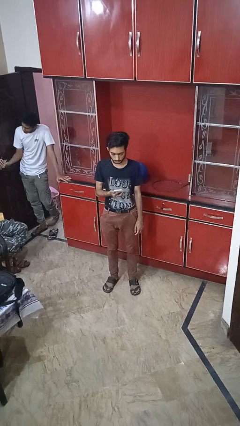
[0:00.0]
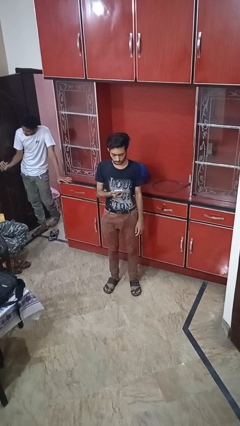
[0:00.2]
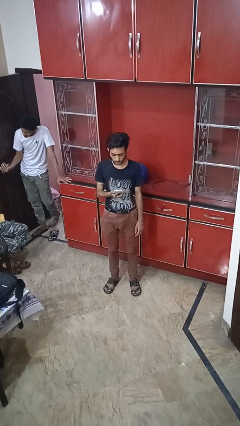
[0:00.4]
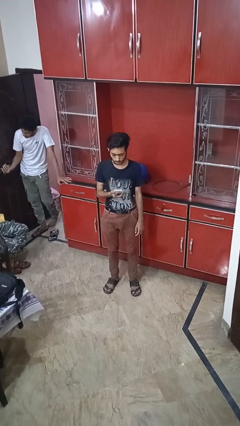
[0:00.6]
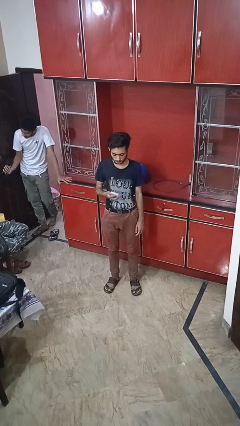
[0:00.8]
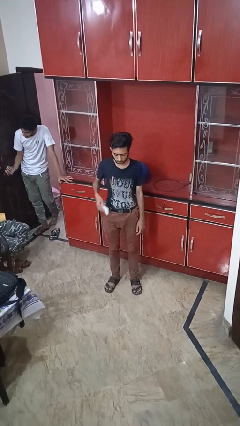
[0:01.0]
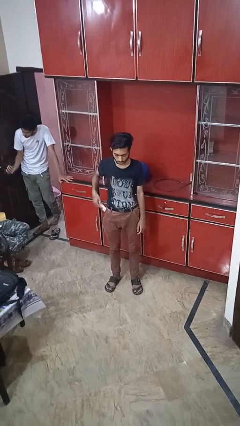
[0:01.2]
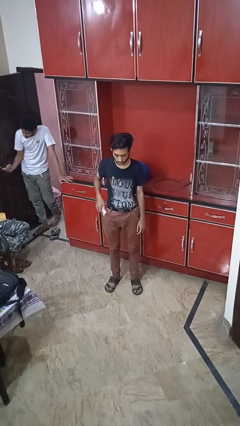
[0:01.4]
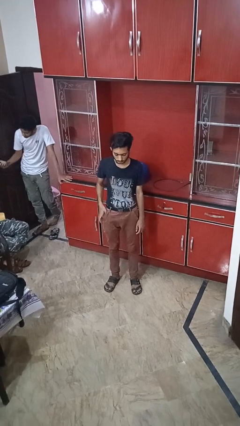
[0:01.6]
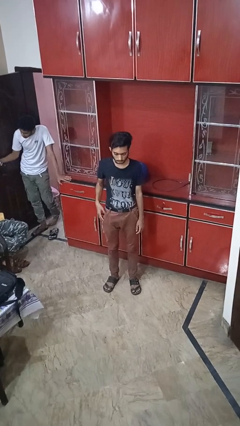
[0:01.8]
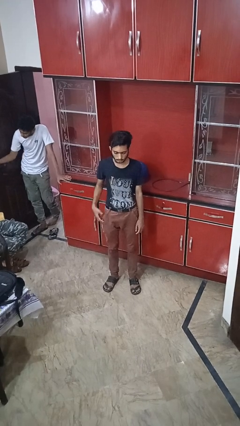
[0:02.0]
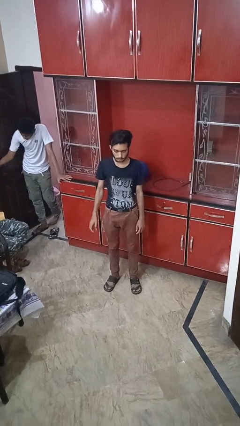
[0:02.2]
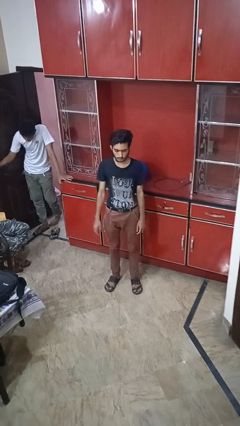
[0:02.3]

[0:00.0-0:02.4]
person puts phone into pocket

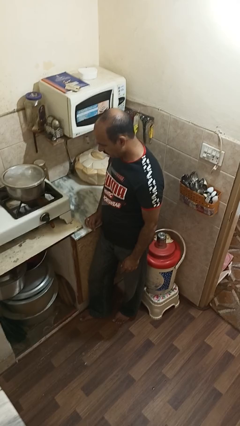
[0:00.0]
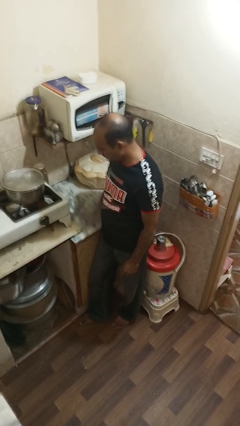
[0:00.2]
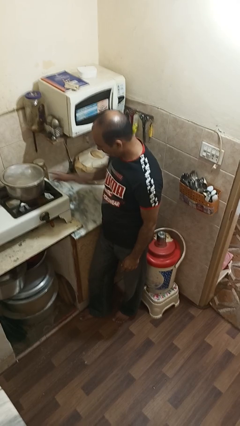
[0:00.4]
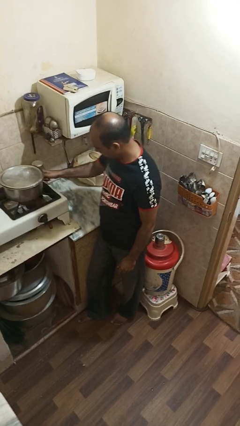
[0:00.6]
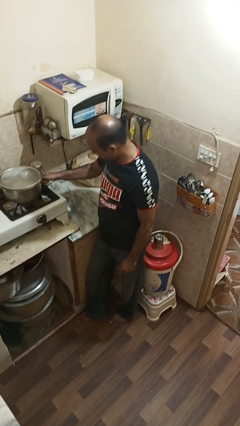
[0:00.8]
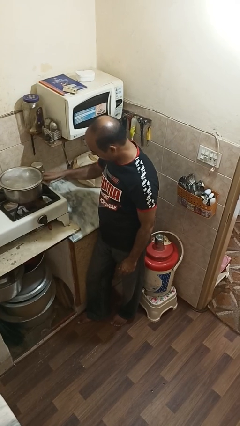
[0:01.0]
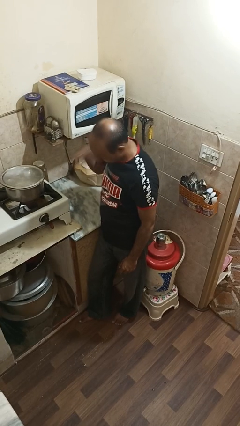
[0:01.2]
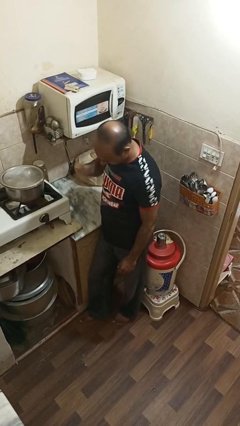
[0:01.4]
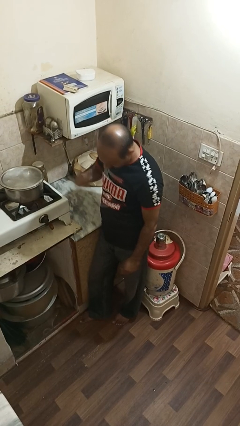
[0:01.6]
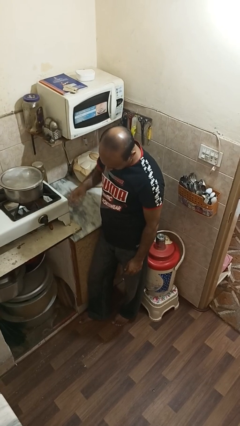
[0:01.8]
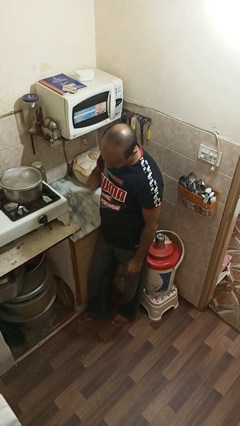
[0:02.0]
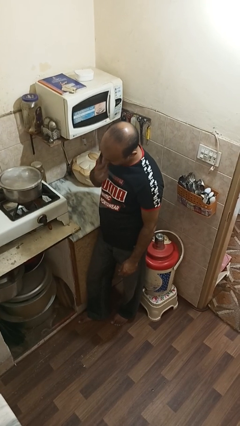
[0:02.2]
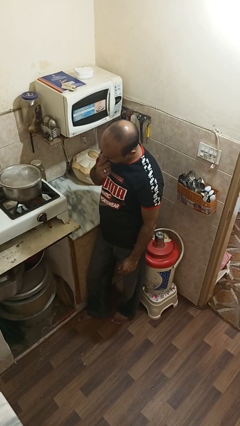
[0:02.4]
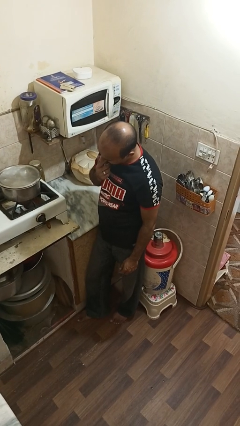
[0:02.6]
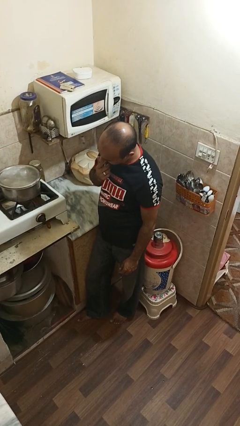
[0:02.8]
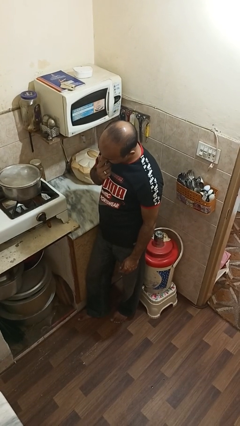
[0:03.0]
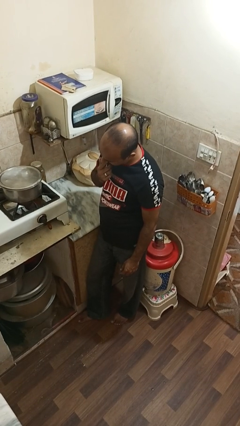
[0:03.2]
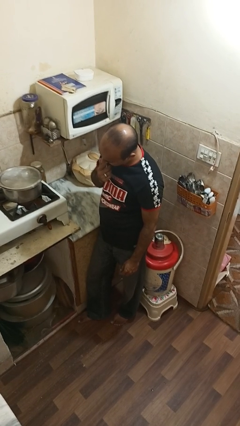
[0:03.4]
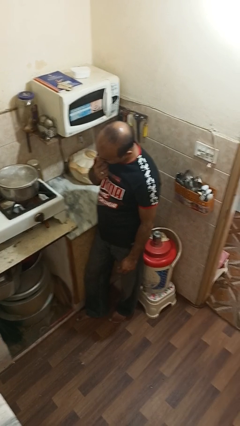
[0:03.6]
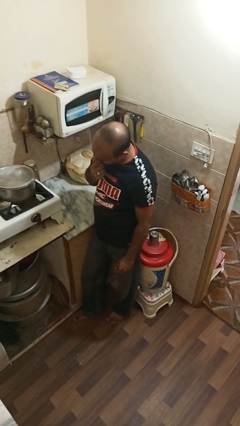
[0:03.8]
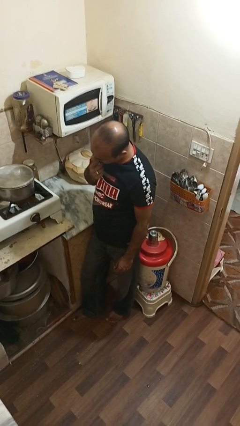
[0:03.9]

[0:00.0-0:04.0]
person burns hand

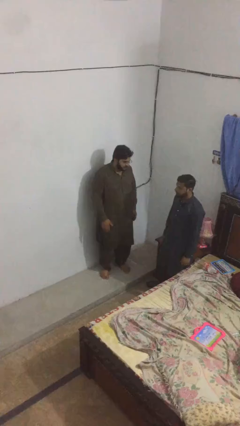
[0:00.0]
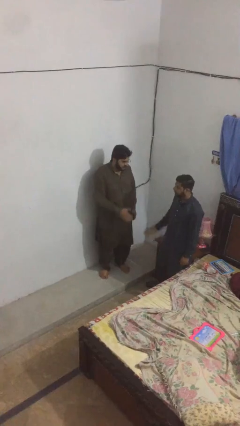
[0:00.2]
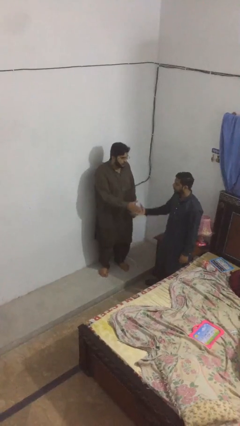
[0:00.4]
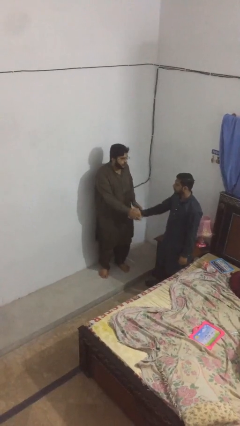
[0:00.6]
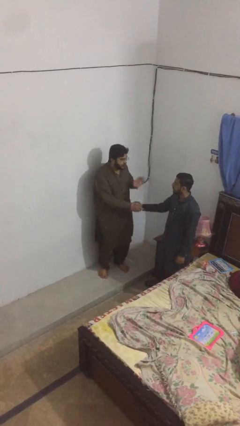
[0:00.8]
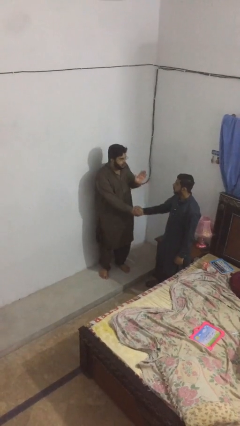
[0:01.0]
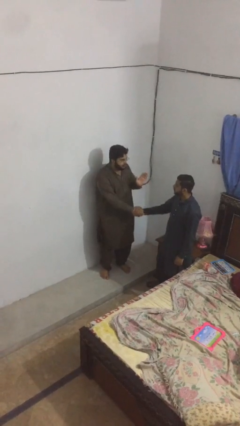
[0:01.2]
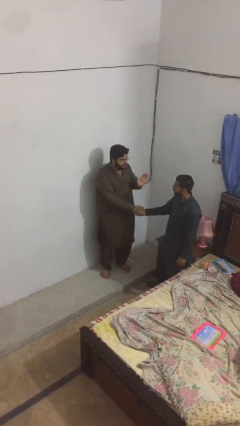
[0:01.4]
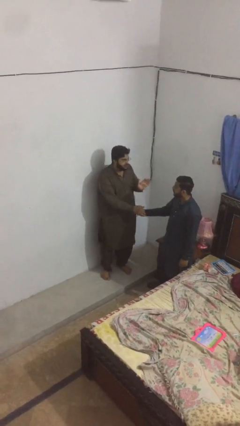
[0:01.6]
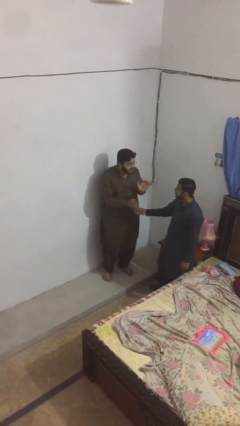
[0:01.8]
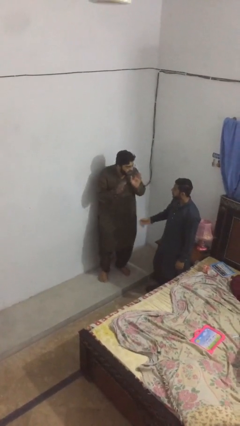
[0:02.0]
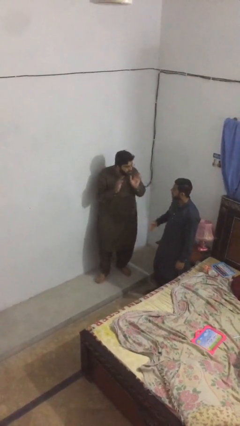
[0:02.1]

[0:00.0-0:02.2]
person shakes hand

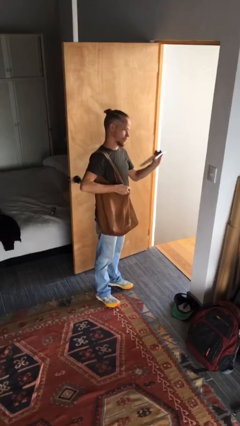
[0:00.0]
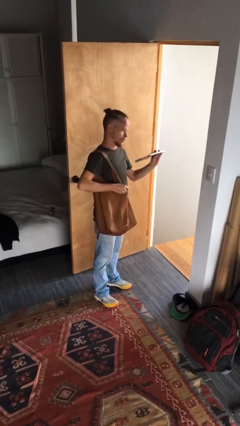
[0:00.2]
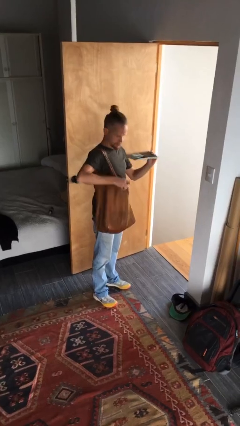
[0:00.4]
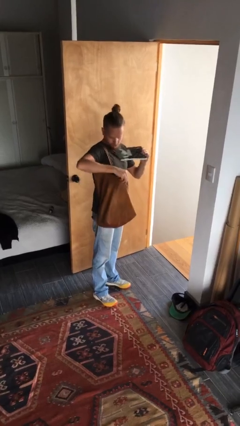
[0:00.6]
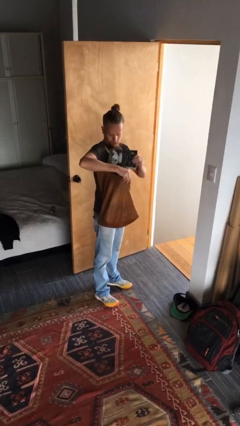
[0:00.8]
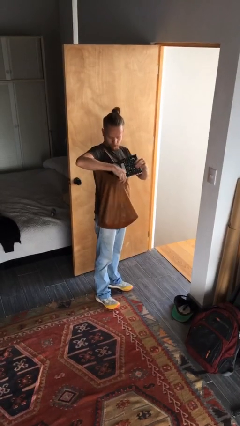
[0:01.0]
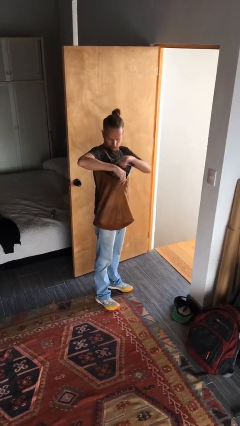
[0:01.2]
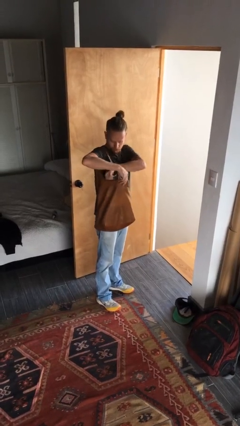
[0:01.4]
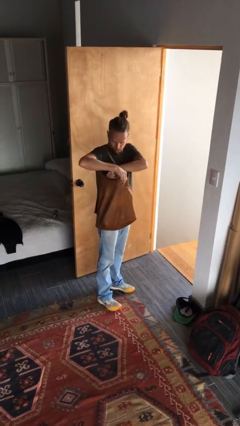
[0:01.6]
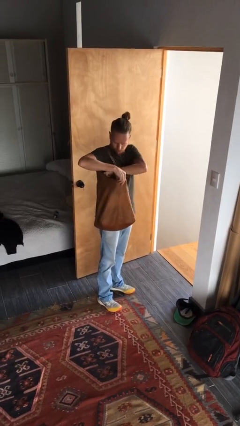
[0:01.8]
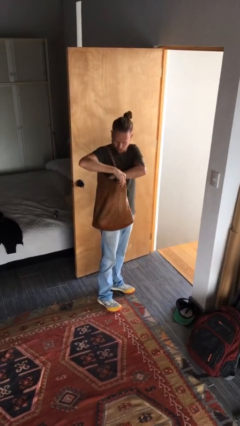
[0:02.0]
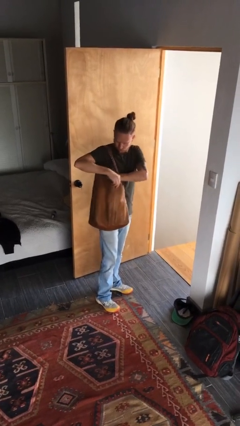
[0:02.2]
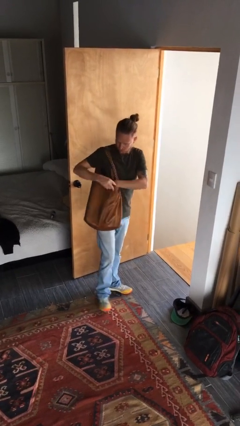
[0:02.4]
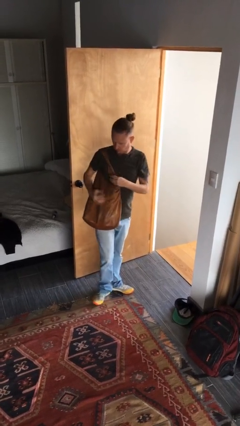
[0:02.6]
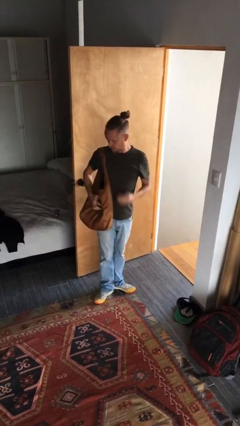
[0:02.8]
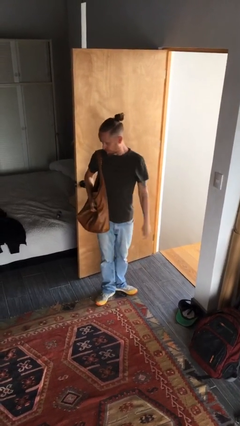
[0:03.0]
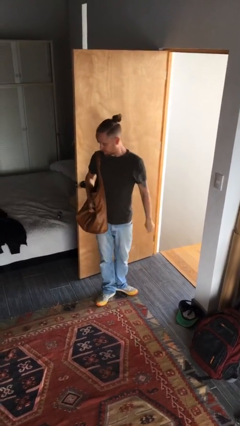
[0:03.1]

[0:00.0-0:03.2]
person puts object into purse

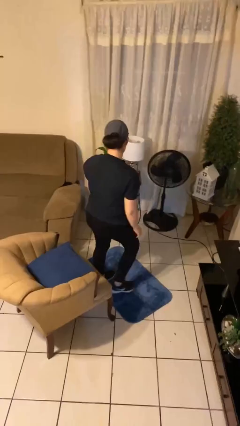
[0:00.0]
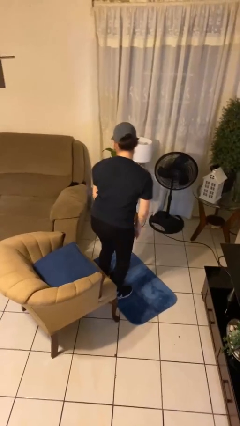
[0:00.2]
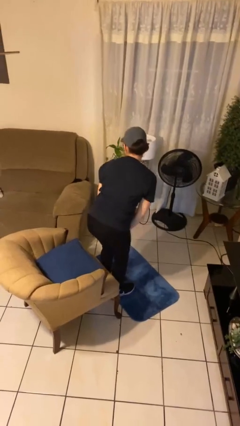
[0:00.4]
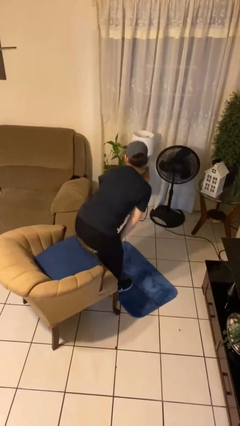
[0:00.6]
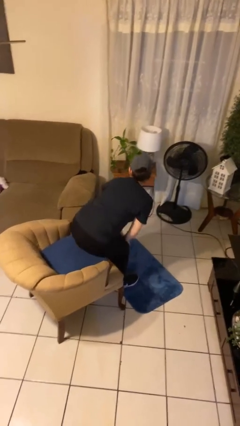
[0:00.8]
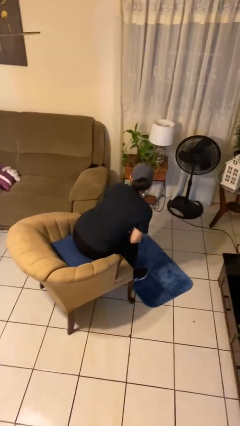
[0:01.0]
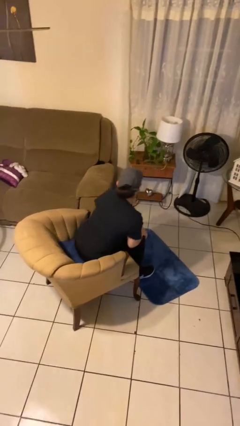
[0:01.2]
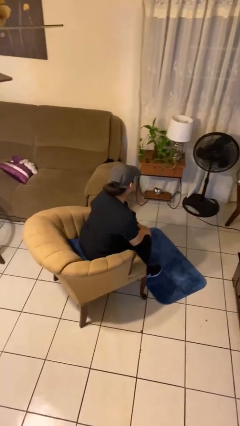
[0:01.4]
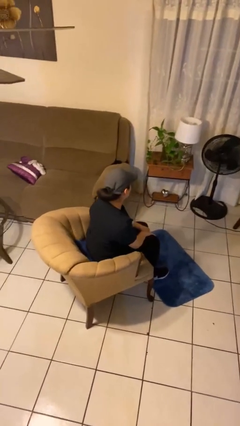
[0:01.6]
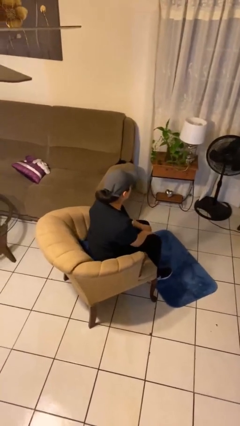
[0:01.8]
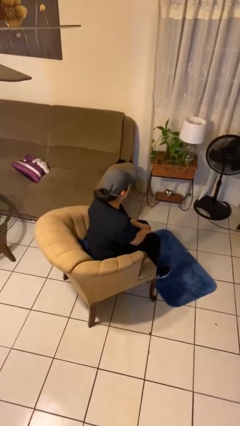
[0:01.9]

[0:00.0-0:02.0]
person sits down

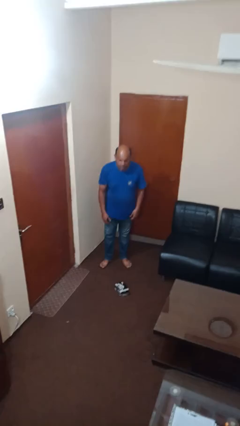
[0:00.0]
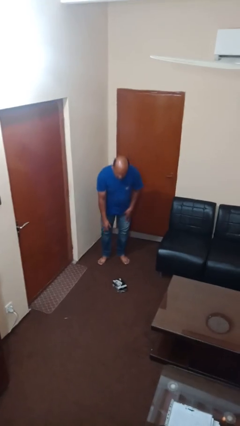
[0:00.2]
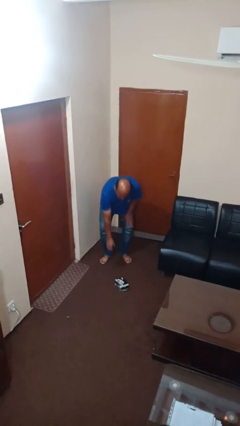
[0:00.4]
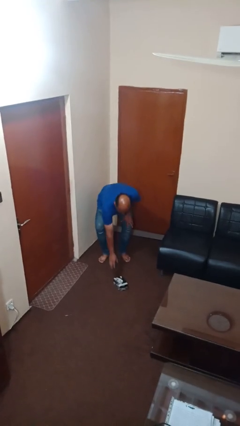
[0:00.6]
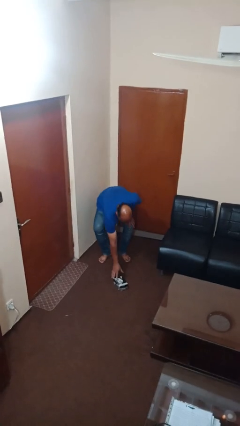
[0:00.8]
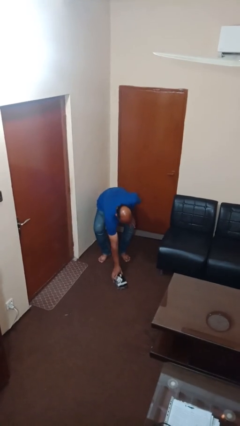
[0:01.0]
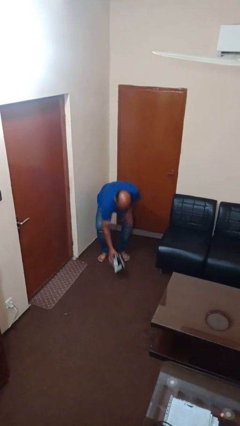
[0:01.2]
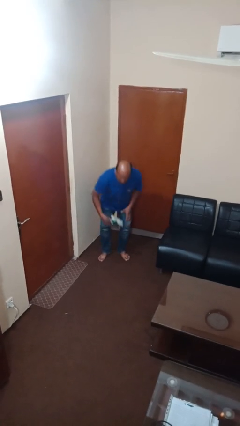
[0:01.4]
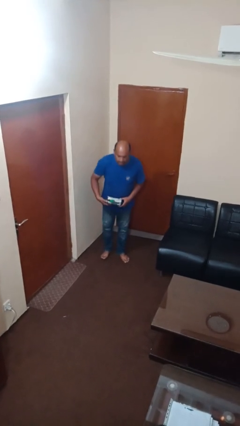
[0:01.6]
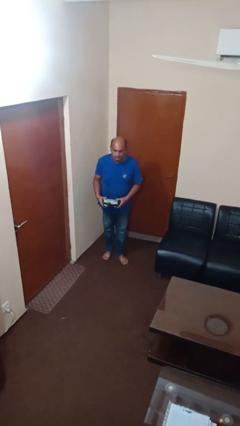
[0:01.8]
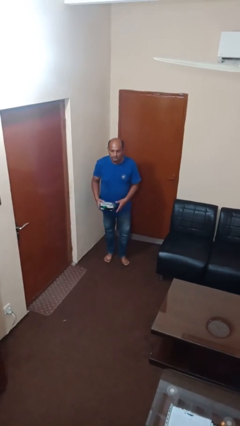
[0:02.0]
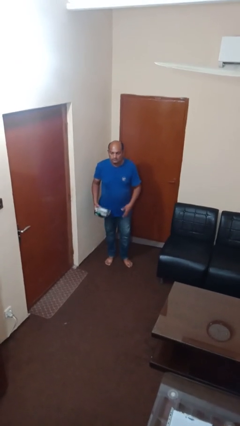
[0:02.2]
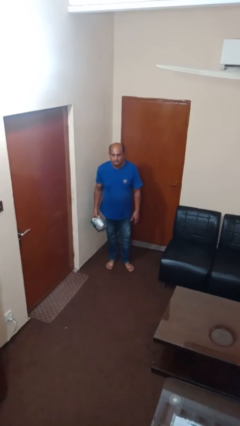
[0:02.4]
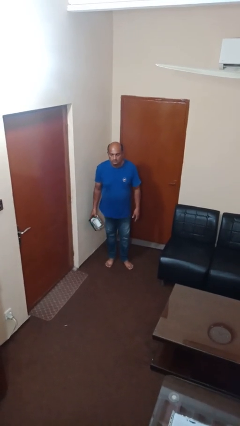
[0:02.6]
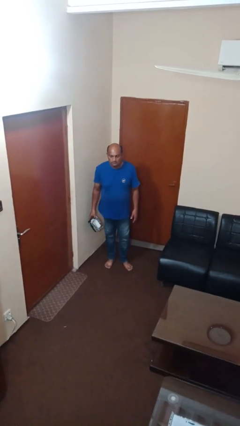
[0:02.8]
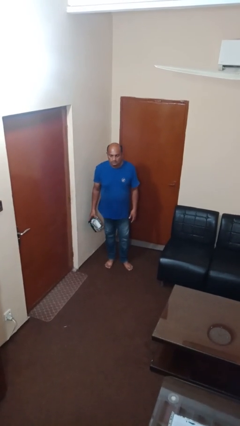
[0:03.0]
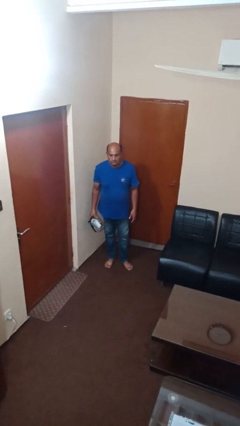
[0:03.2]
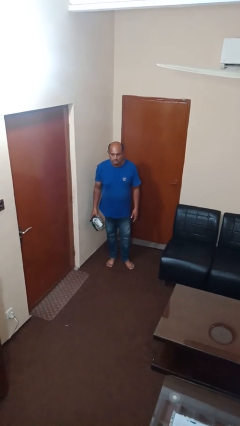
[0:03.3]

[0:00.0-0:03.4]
person picks up object from floor

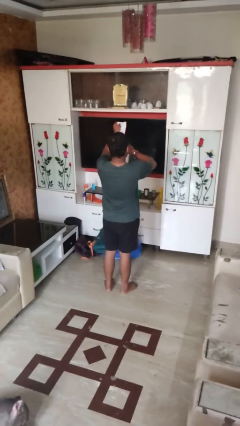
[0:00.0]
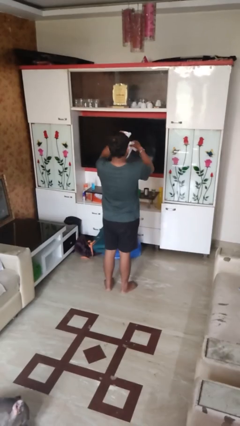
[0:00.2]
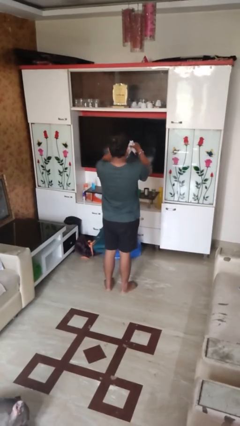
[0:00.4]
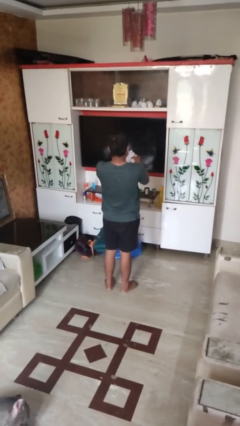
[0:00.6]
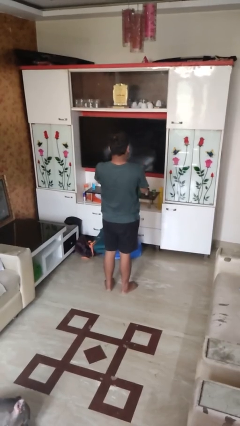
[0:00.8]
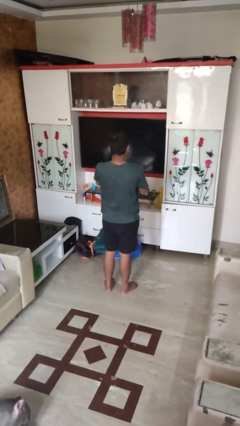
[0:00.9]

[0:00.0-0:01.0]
person tears paper
